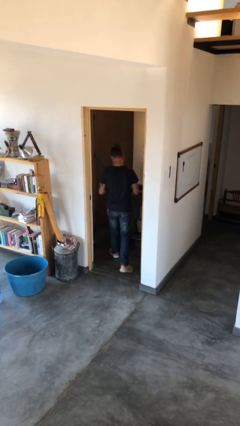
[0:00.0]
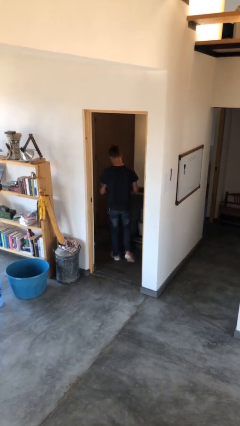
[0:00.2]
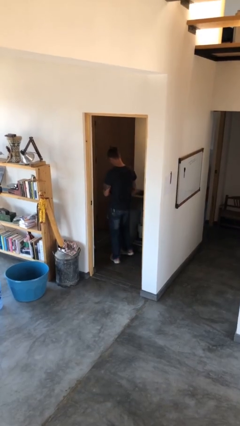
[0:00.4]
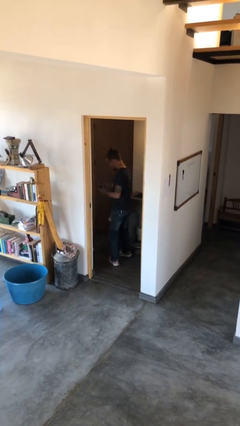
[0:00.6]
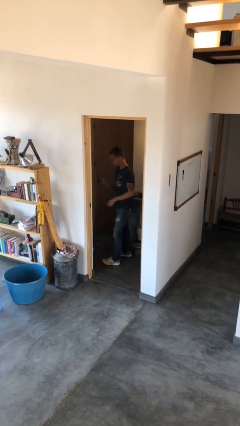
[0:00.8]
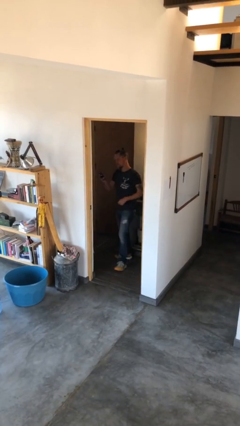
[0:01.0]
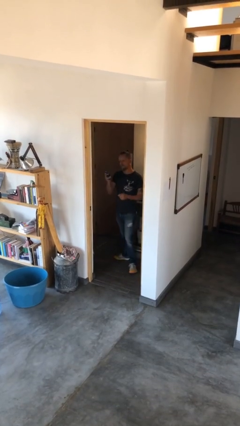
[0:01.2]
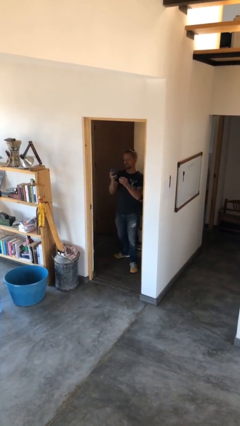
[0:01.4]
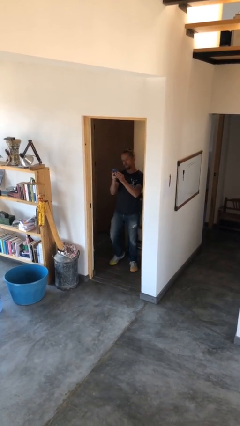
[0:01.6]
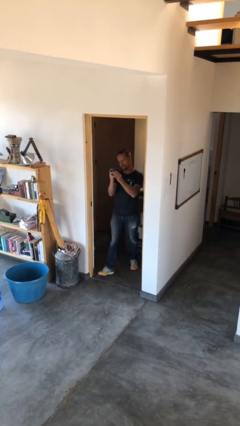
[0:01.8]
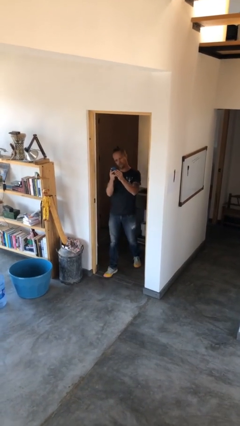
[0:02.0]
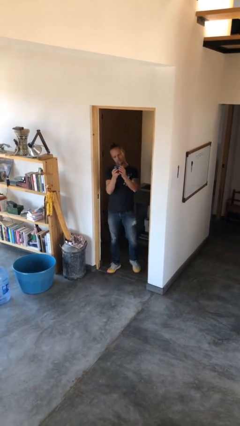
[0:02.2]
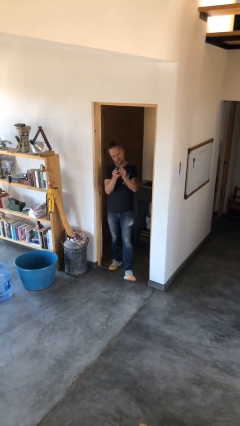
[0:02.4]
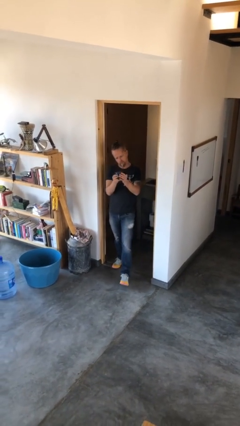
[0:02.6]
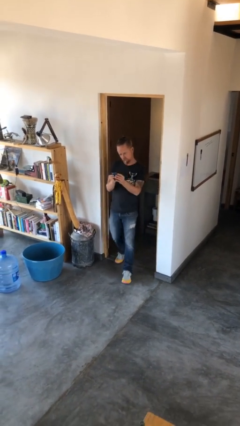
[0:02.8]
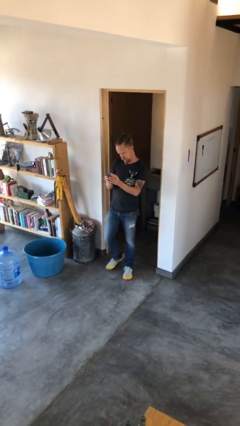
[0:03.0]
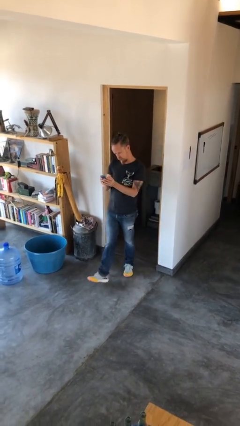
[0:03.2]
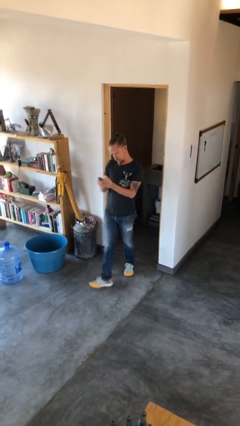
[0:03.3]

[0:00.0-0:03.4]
person enters scene through structure

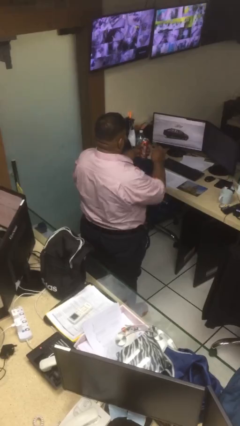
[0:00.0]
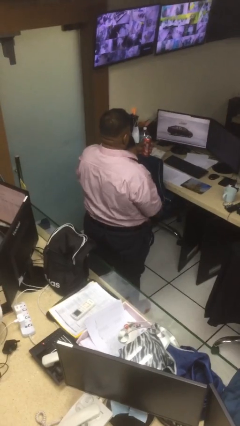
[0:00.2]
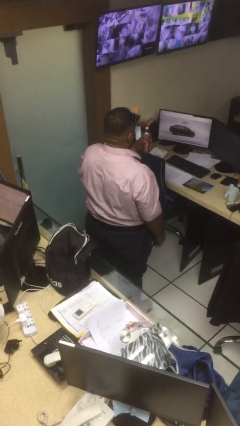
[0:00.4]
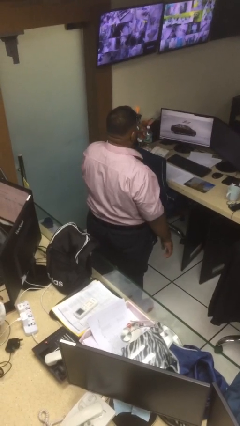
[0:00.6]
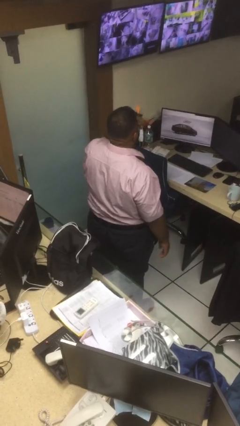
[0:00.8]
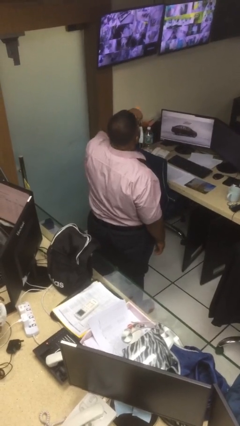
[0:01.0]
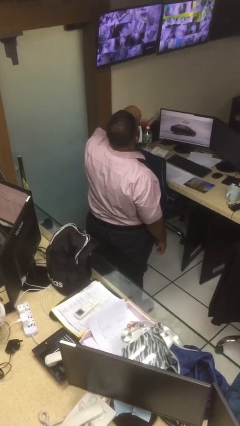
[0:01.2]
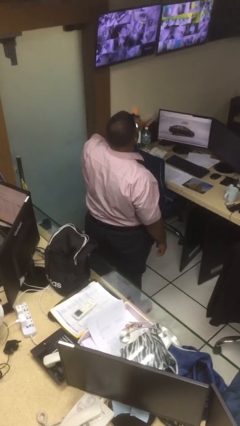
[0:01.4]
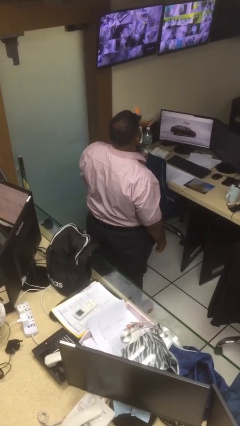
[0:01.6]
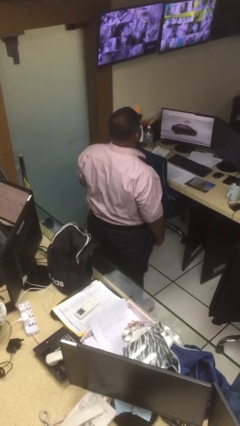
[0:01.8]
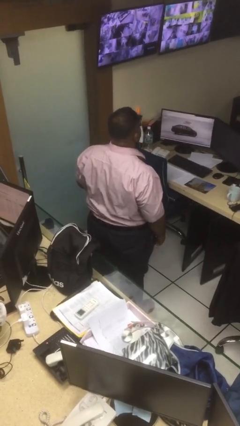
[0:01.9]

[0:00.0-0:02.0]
person drinks from beverage can

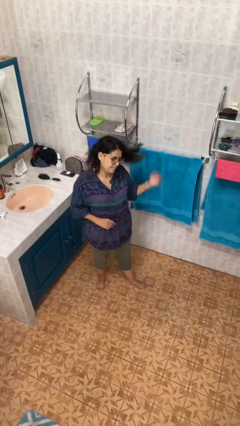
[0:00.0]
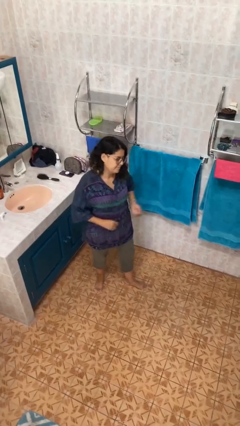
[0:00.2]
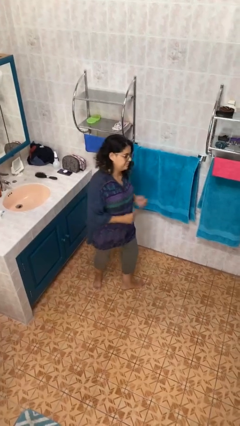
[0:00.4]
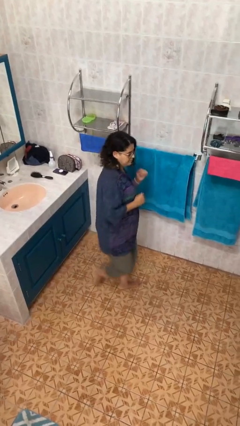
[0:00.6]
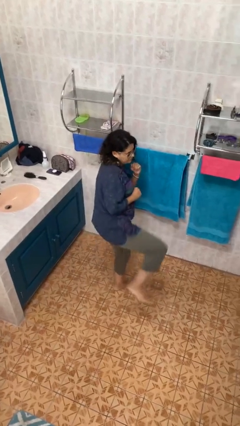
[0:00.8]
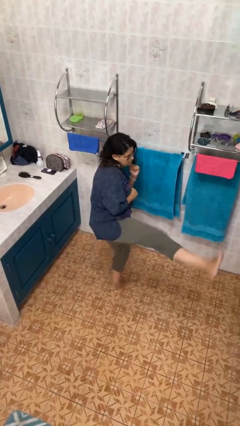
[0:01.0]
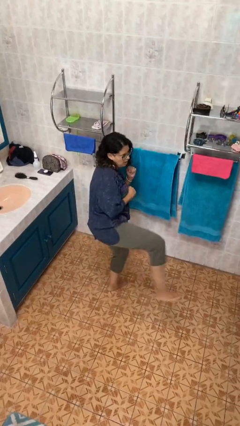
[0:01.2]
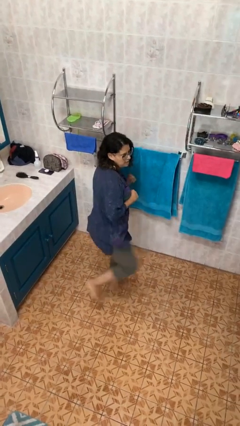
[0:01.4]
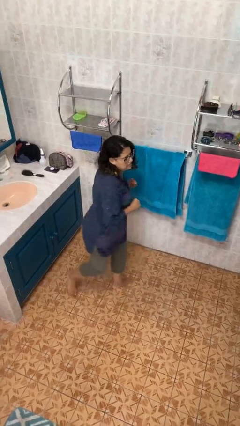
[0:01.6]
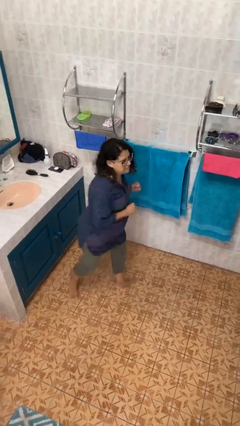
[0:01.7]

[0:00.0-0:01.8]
person karate kicks

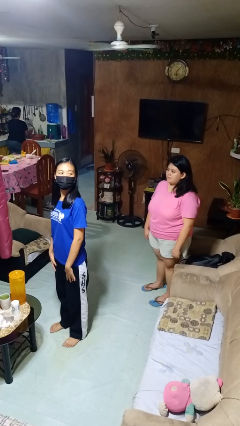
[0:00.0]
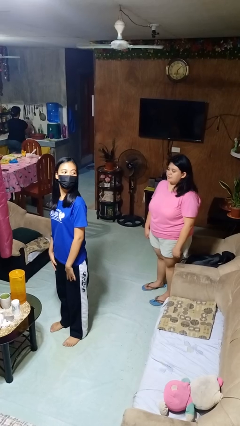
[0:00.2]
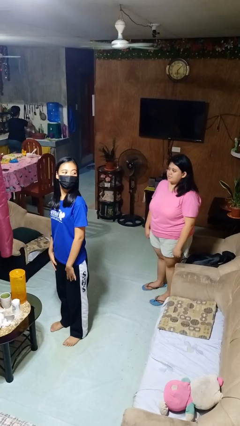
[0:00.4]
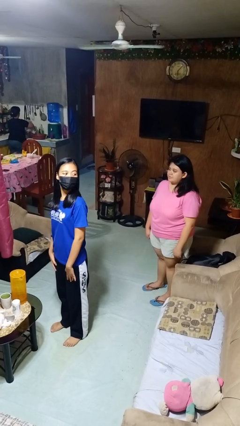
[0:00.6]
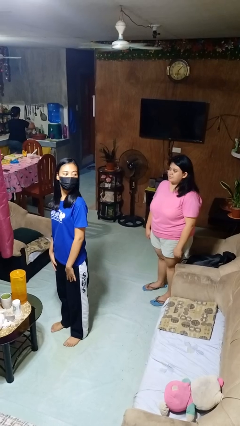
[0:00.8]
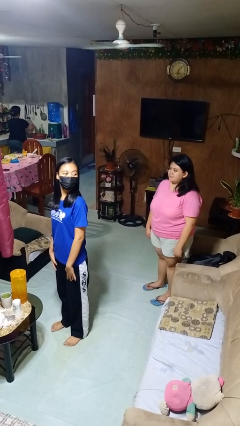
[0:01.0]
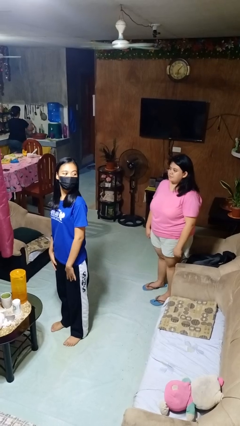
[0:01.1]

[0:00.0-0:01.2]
person looks over shoulder

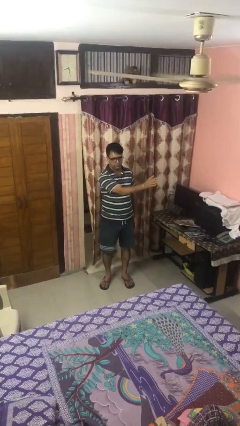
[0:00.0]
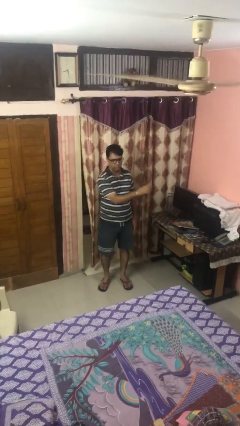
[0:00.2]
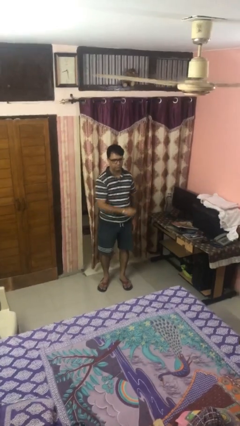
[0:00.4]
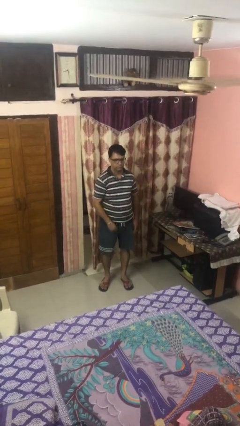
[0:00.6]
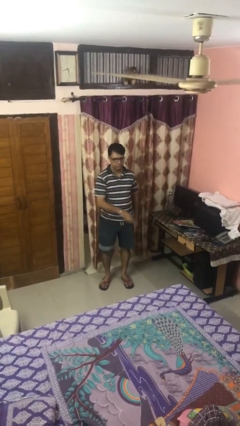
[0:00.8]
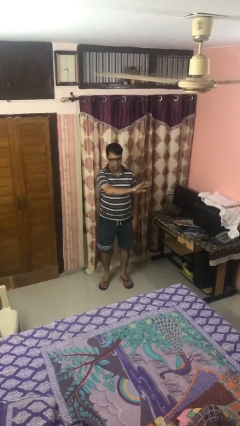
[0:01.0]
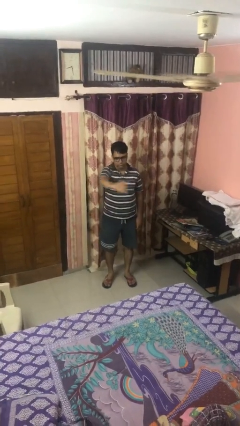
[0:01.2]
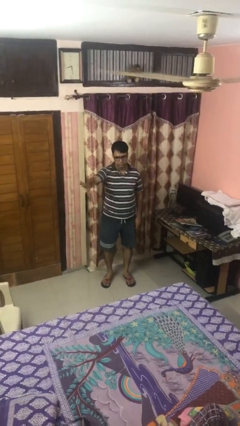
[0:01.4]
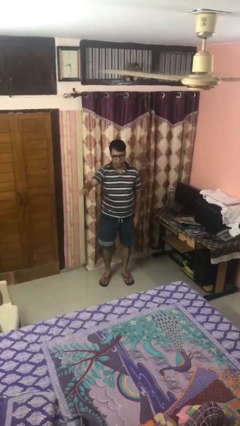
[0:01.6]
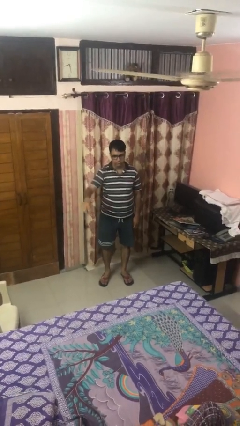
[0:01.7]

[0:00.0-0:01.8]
person gestures swipe right

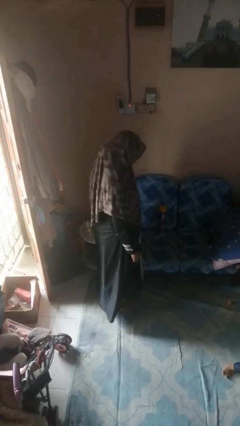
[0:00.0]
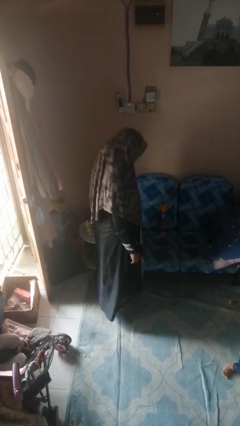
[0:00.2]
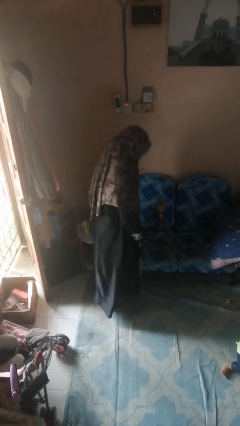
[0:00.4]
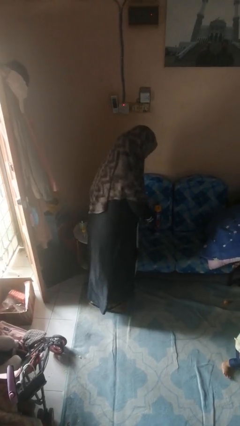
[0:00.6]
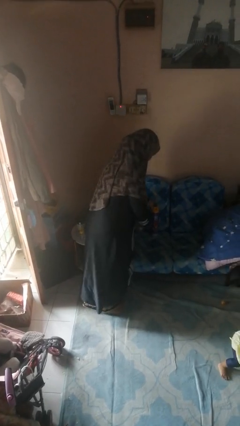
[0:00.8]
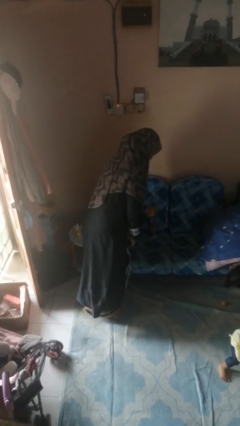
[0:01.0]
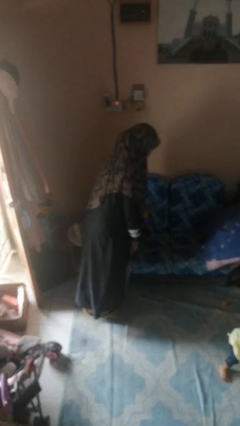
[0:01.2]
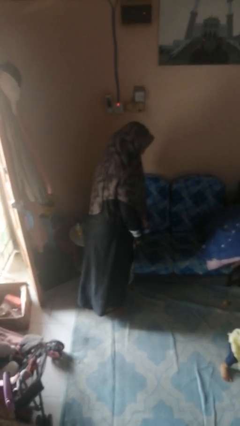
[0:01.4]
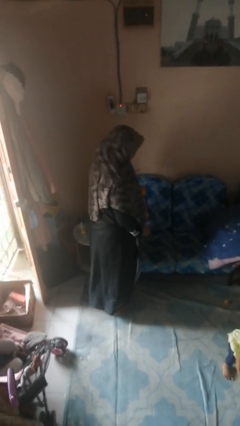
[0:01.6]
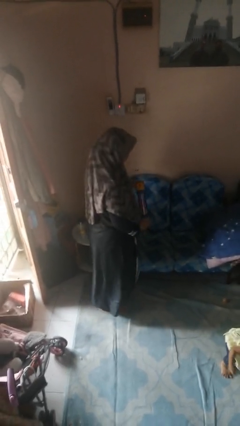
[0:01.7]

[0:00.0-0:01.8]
person picks up object from couch

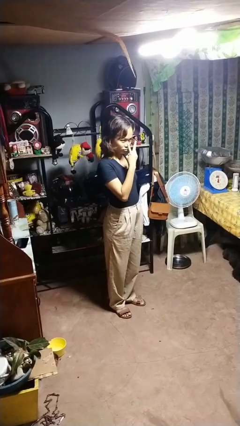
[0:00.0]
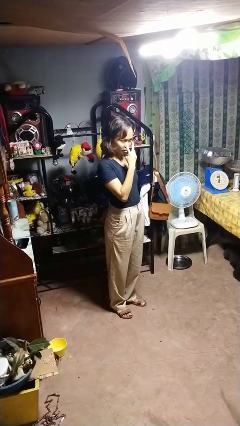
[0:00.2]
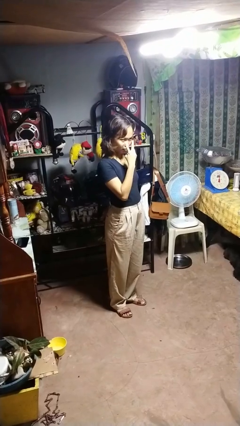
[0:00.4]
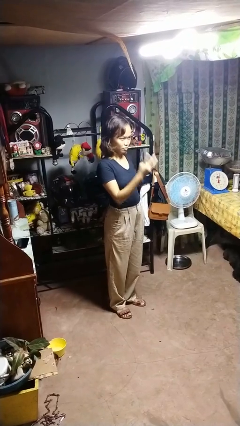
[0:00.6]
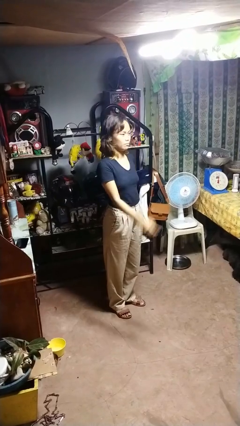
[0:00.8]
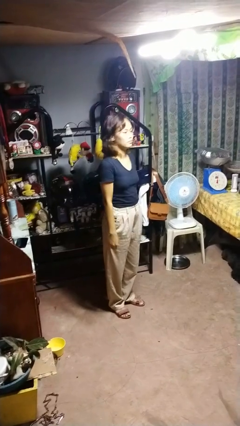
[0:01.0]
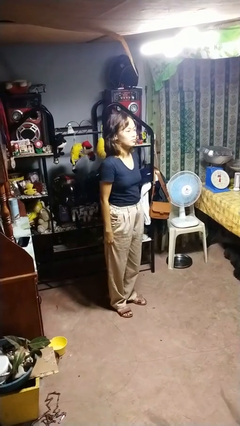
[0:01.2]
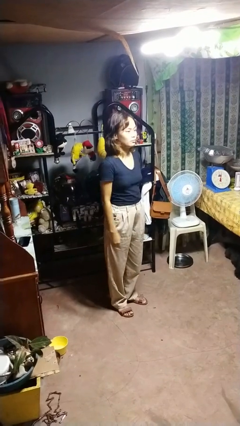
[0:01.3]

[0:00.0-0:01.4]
person gestures watch closely

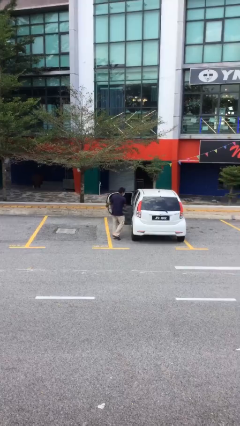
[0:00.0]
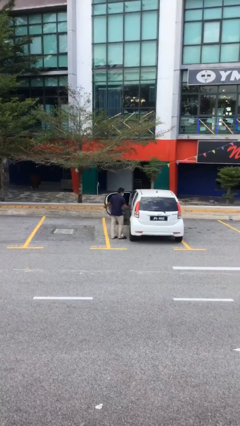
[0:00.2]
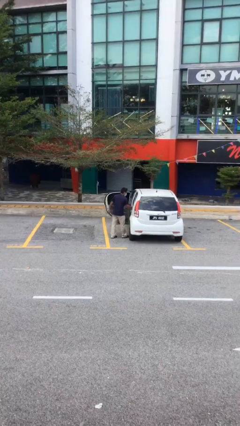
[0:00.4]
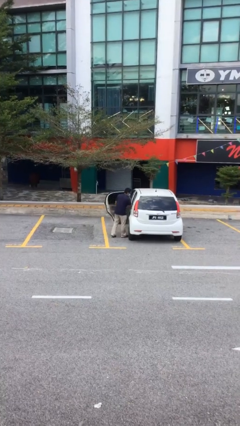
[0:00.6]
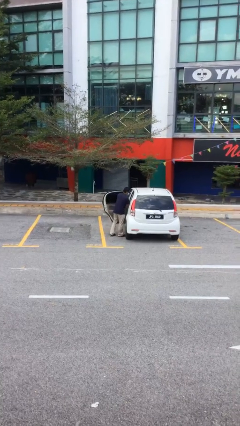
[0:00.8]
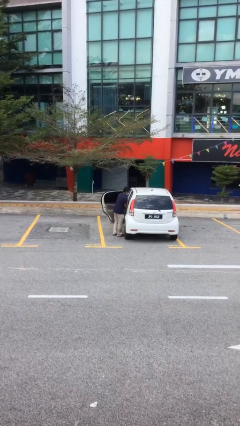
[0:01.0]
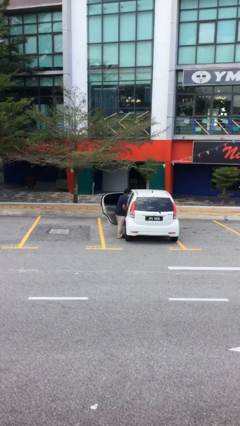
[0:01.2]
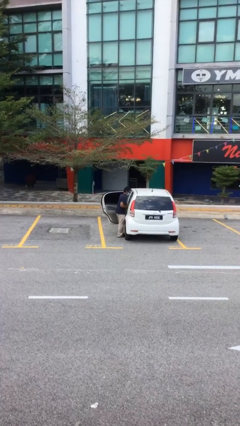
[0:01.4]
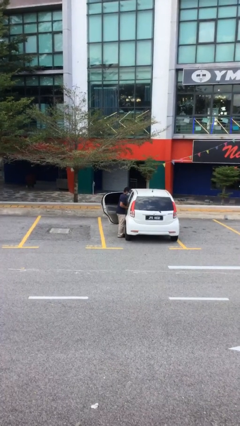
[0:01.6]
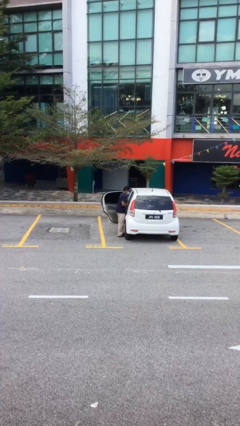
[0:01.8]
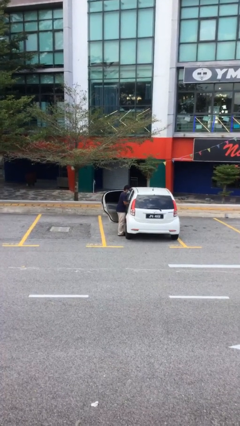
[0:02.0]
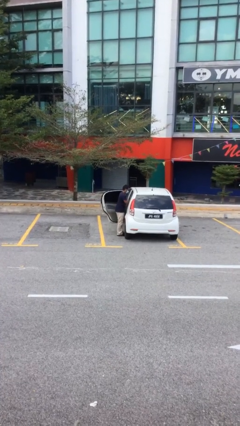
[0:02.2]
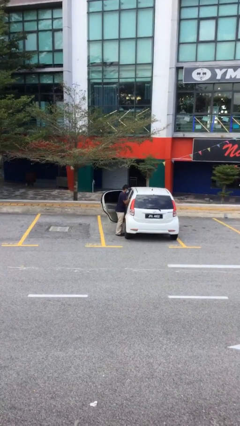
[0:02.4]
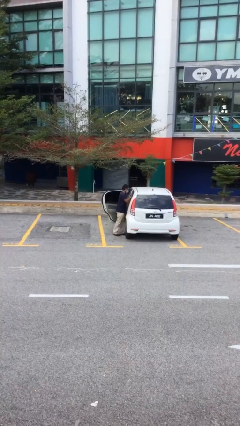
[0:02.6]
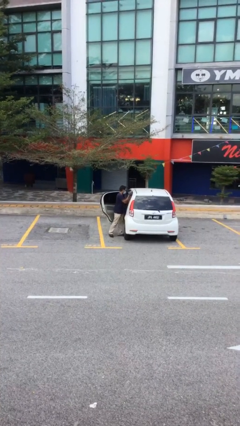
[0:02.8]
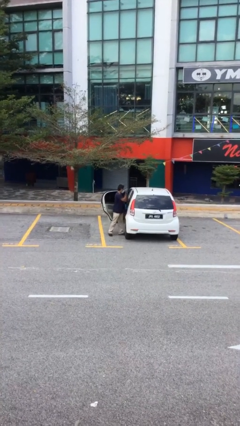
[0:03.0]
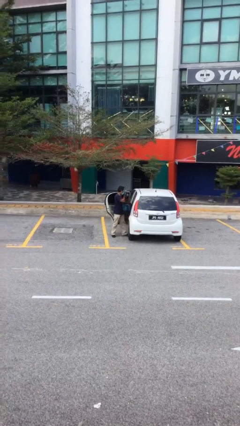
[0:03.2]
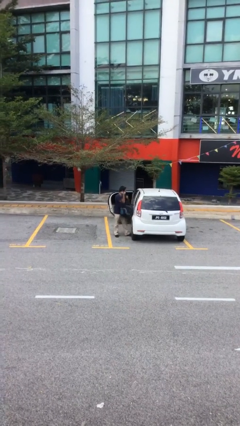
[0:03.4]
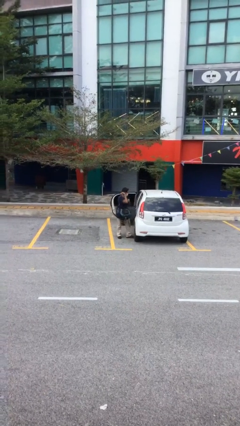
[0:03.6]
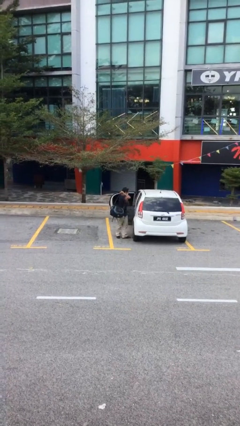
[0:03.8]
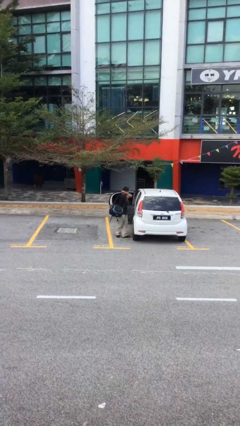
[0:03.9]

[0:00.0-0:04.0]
person unloads car
